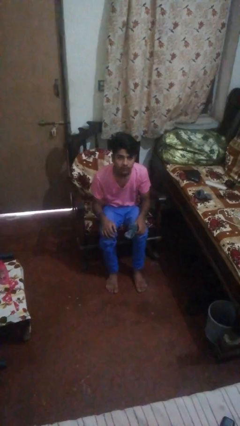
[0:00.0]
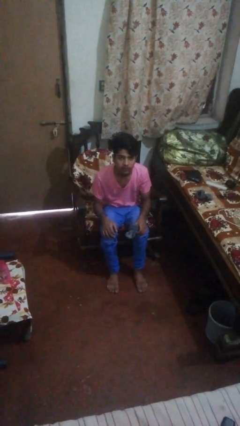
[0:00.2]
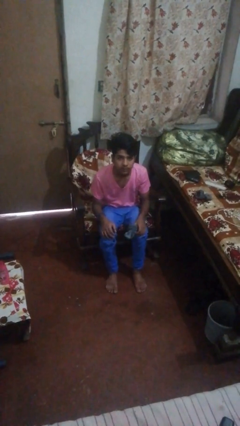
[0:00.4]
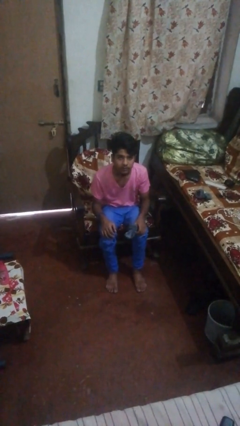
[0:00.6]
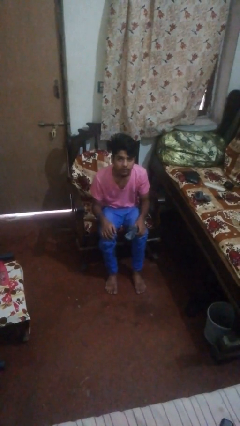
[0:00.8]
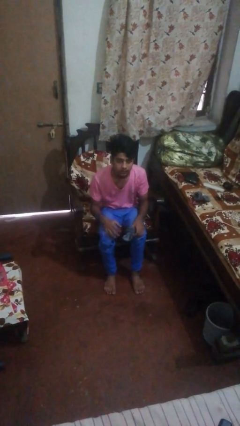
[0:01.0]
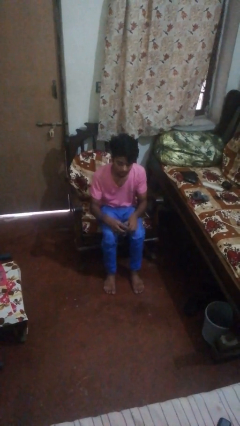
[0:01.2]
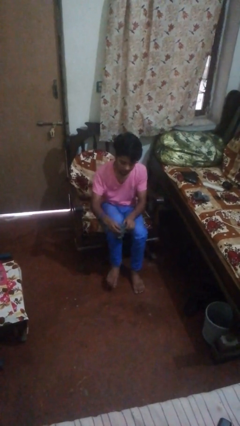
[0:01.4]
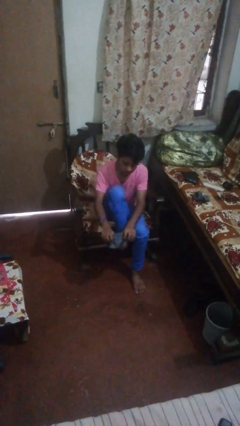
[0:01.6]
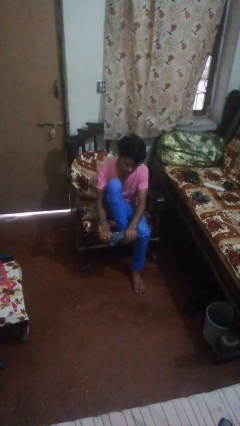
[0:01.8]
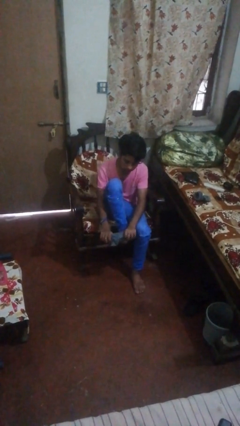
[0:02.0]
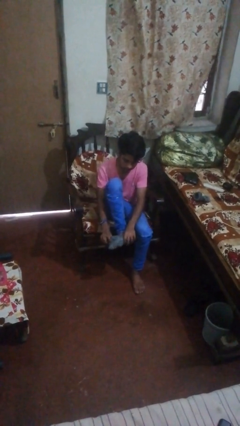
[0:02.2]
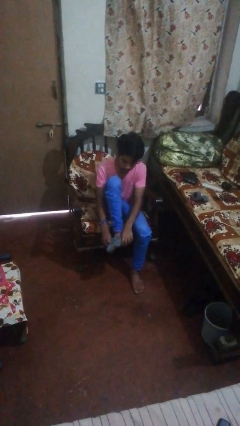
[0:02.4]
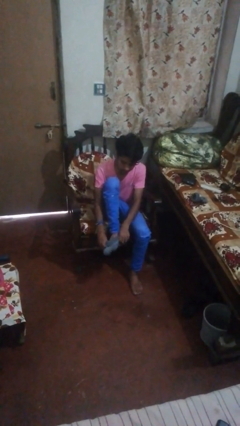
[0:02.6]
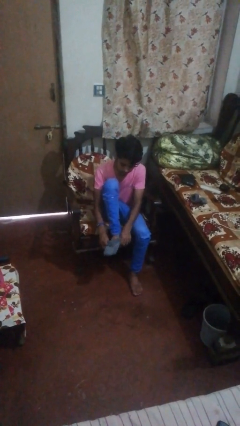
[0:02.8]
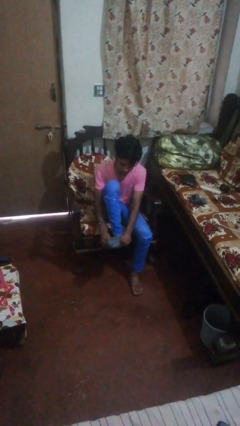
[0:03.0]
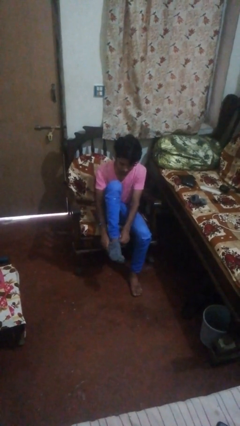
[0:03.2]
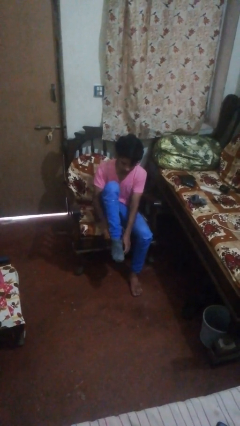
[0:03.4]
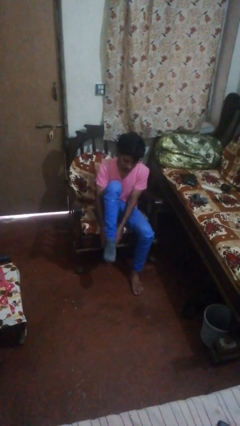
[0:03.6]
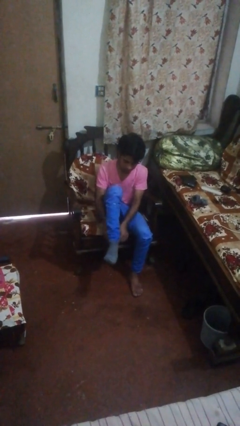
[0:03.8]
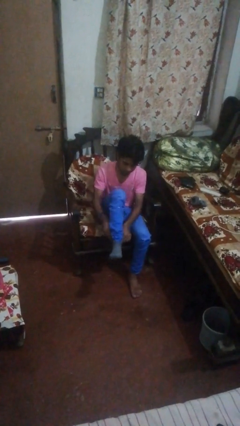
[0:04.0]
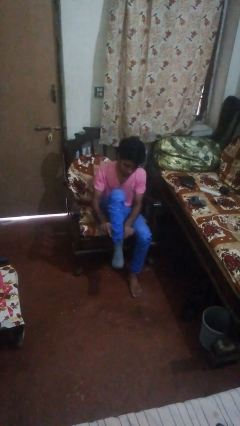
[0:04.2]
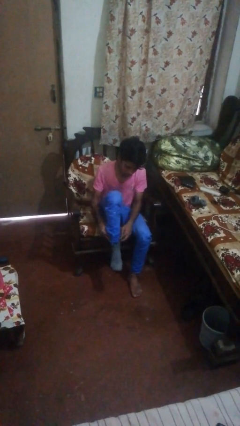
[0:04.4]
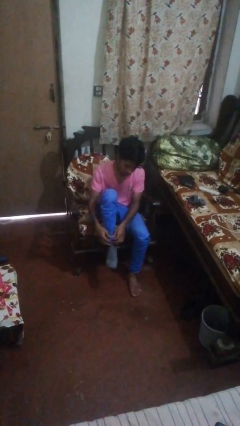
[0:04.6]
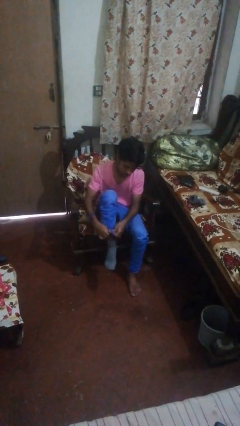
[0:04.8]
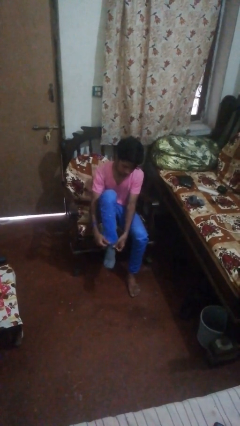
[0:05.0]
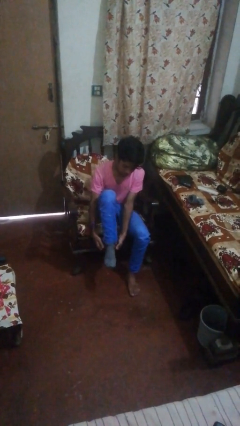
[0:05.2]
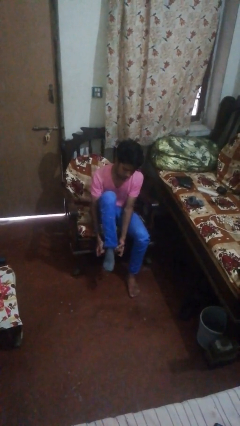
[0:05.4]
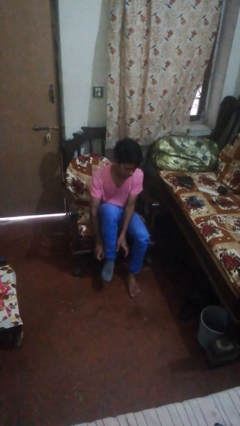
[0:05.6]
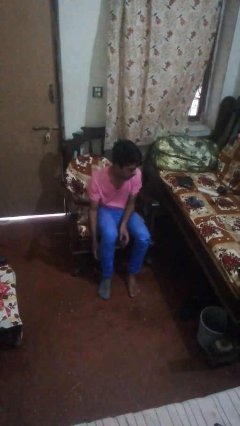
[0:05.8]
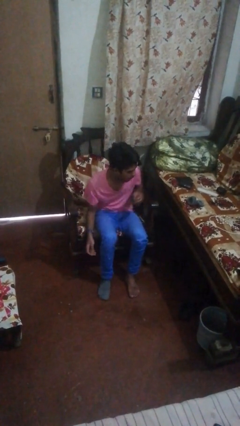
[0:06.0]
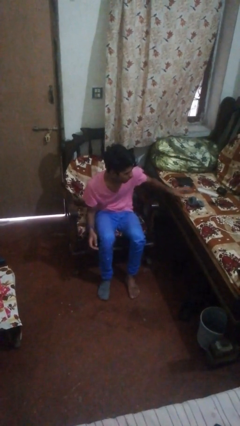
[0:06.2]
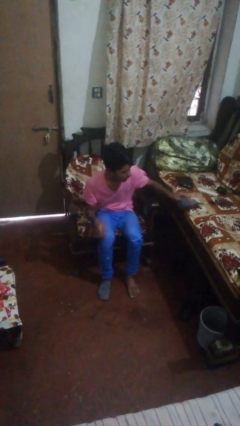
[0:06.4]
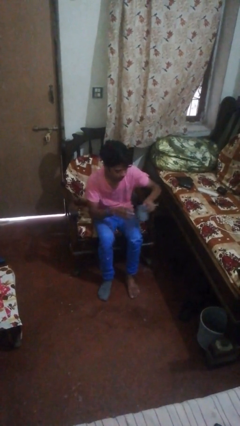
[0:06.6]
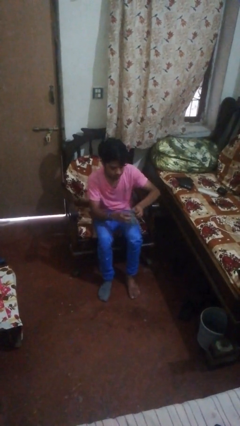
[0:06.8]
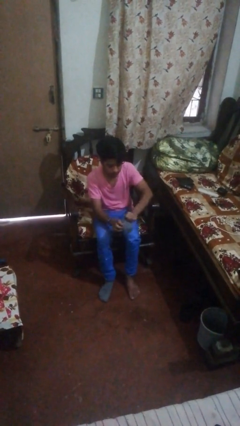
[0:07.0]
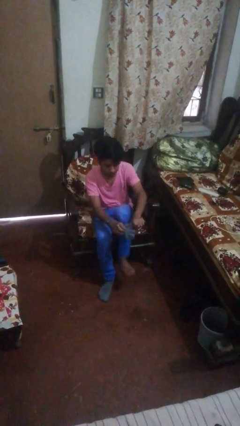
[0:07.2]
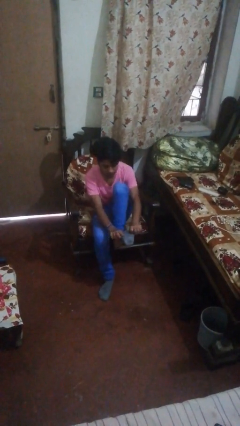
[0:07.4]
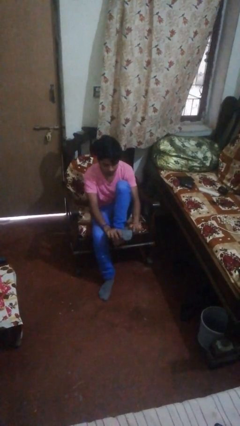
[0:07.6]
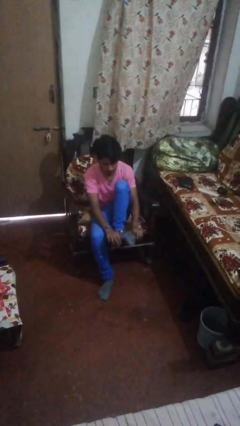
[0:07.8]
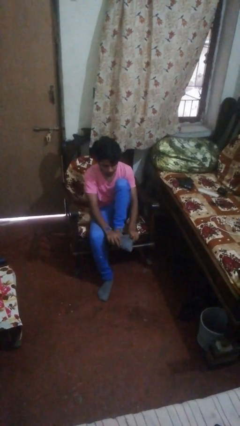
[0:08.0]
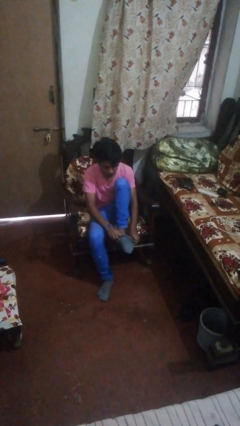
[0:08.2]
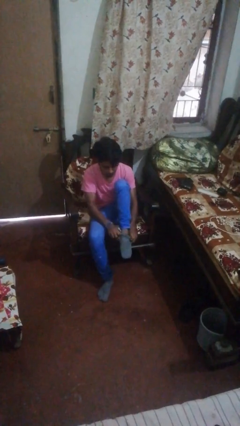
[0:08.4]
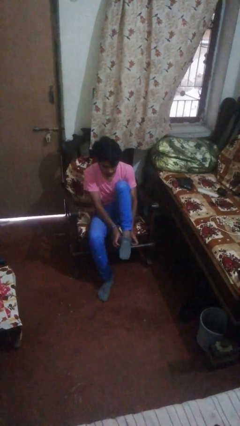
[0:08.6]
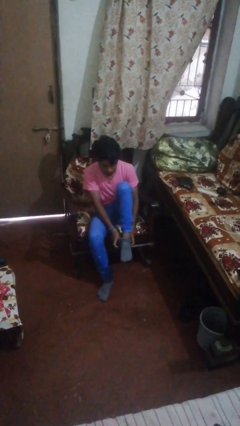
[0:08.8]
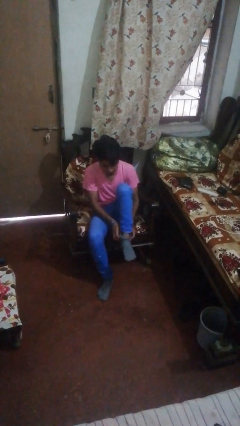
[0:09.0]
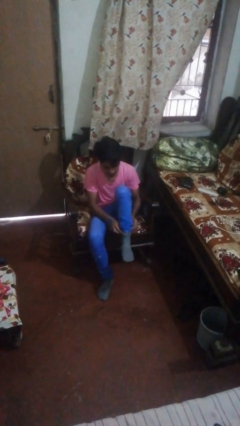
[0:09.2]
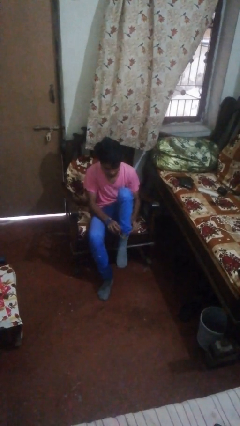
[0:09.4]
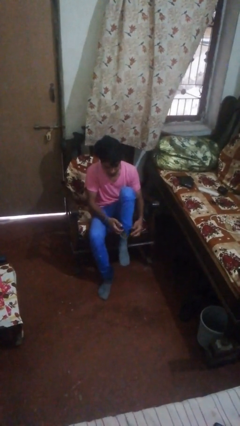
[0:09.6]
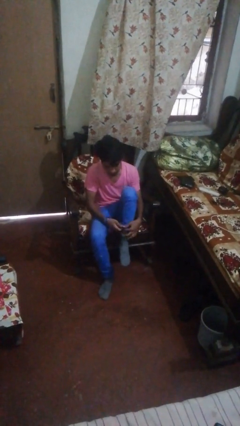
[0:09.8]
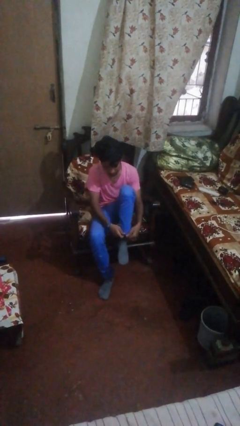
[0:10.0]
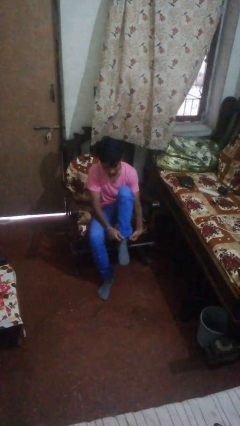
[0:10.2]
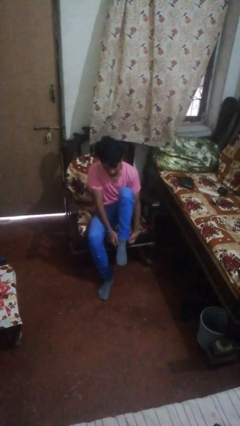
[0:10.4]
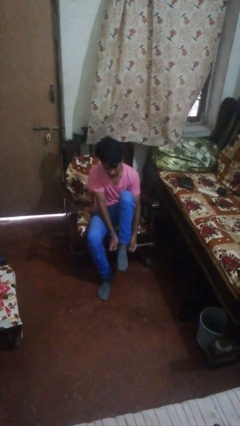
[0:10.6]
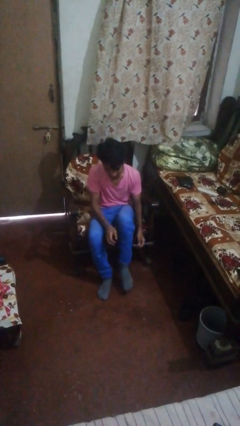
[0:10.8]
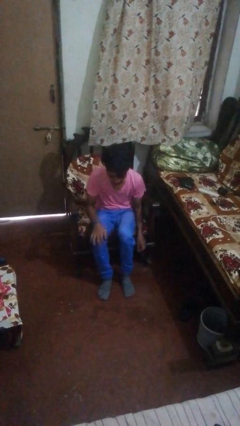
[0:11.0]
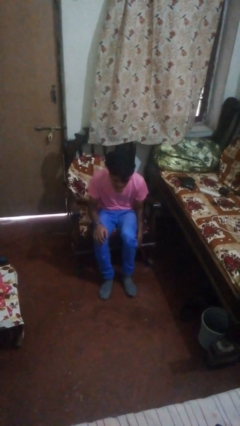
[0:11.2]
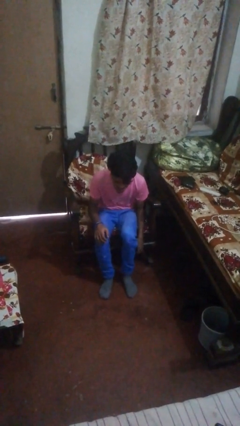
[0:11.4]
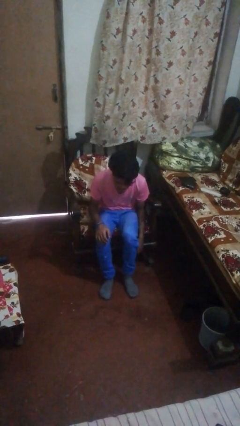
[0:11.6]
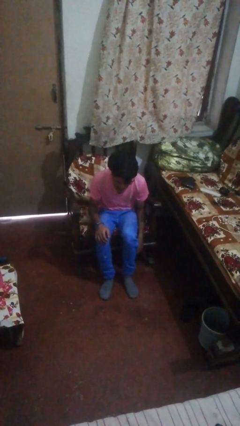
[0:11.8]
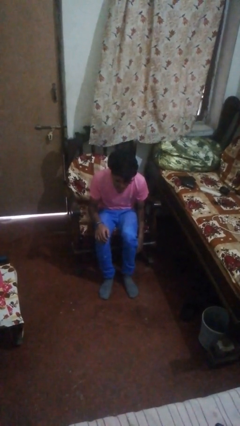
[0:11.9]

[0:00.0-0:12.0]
person puts on socks

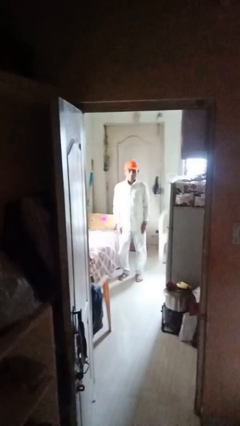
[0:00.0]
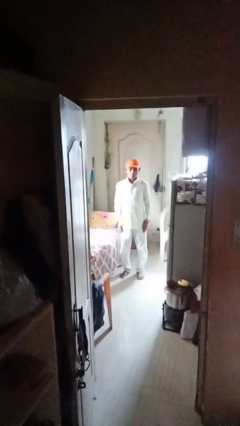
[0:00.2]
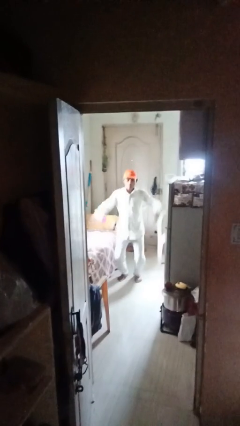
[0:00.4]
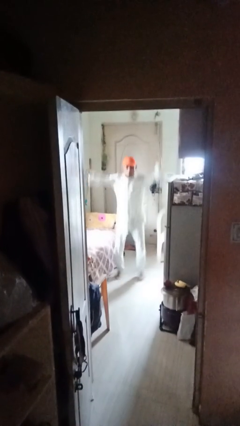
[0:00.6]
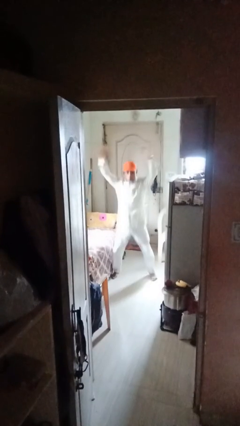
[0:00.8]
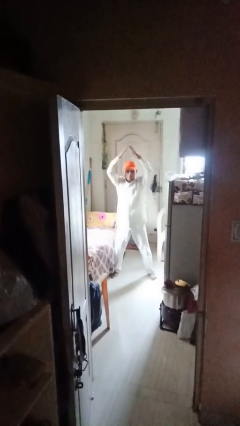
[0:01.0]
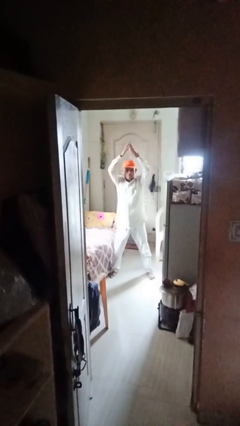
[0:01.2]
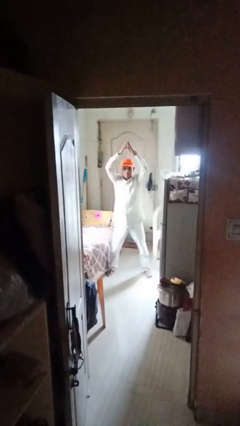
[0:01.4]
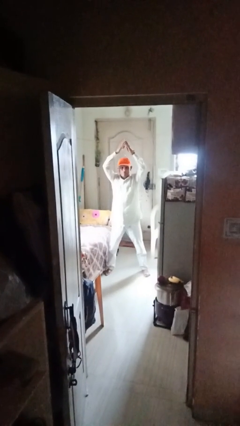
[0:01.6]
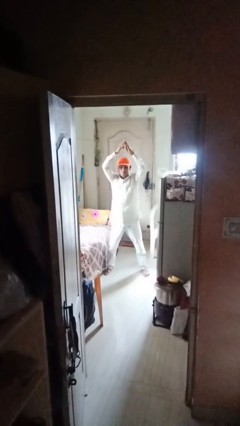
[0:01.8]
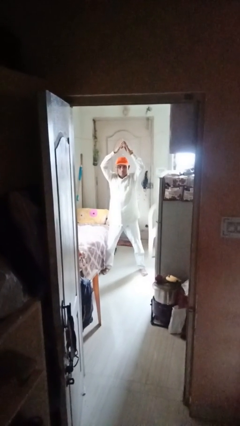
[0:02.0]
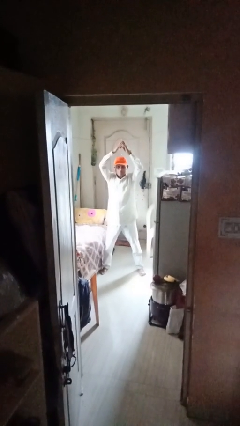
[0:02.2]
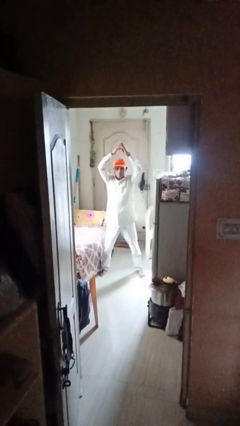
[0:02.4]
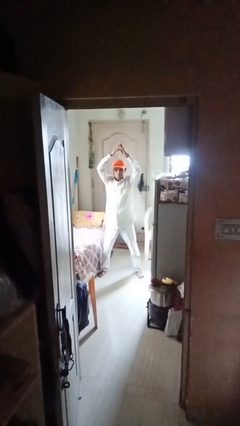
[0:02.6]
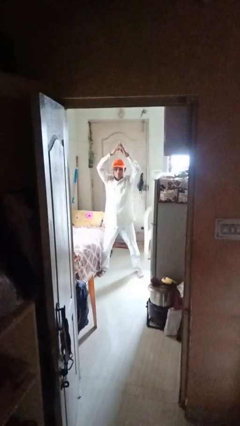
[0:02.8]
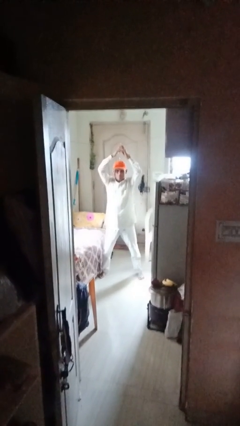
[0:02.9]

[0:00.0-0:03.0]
person exercises with jumping jacks

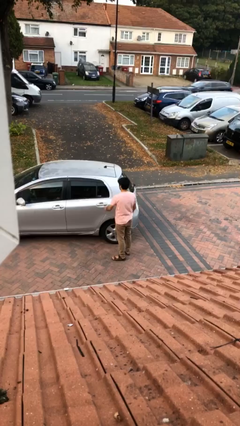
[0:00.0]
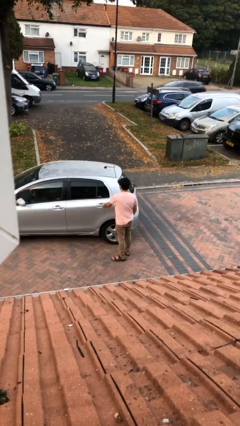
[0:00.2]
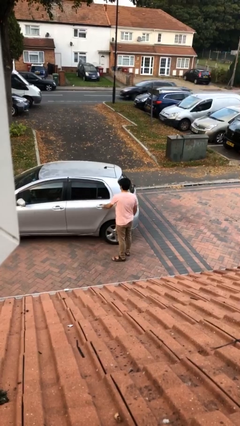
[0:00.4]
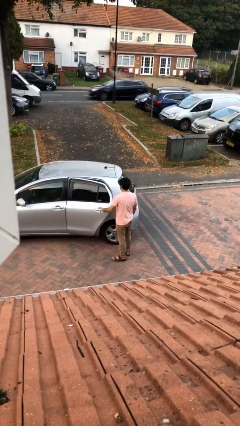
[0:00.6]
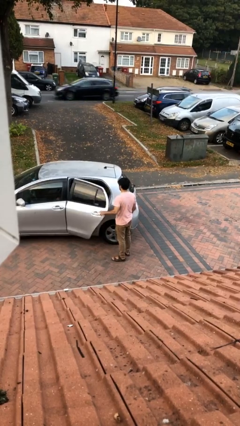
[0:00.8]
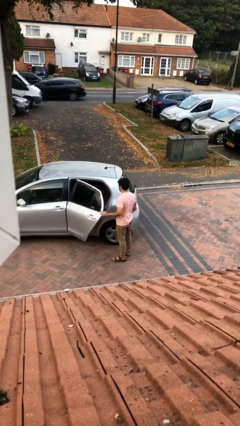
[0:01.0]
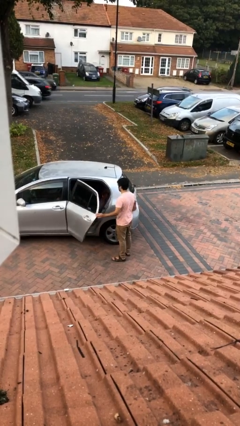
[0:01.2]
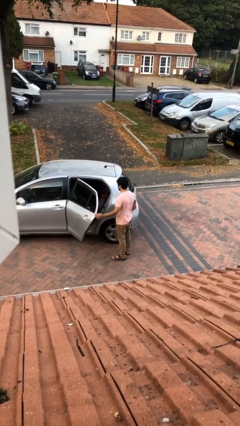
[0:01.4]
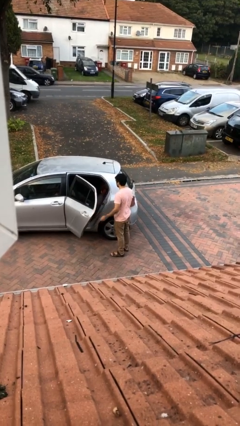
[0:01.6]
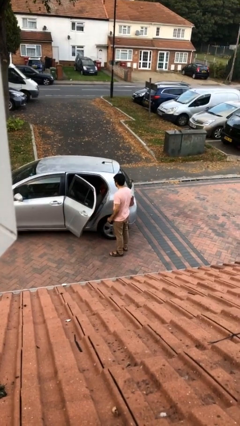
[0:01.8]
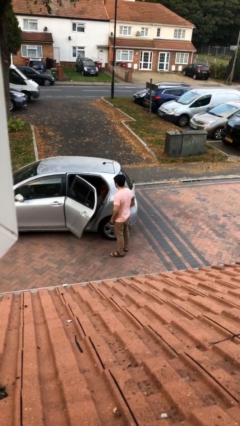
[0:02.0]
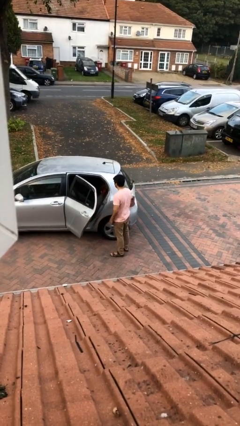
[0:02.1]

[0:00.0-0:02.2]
person opens car door

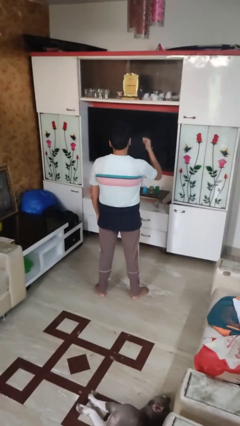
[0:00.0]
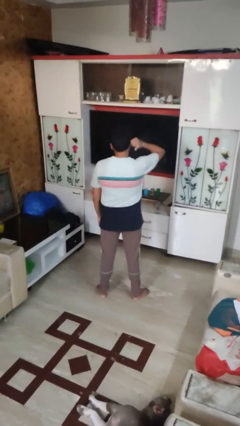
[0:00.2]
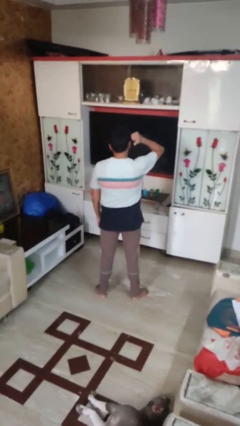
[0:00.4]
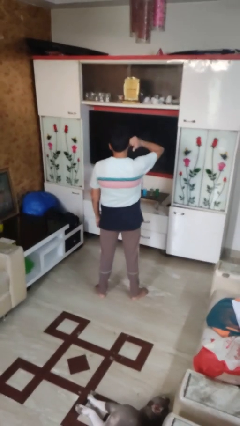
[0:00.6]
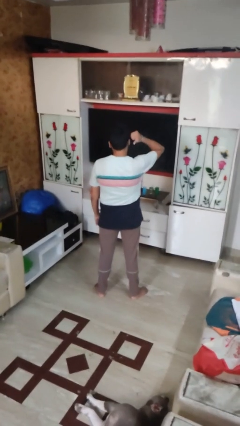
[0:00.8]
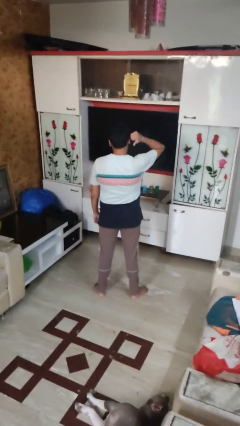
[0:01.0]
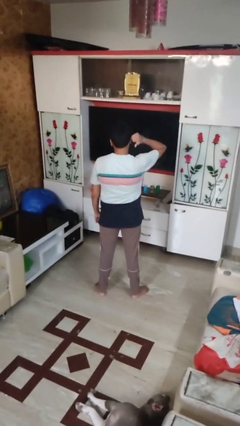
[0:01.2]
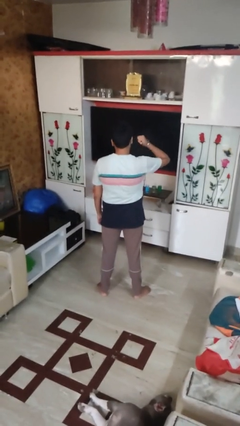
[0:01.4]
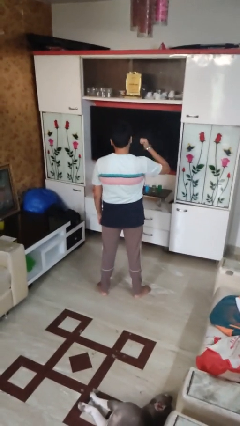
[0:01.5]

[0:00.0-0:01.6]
person gestures behind me
